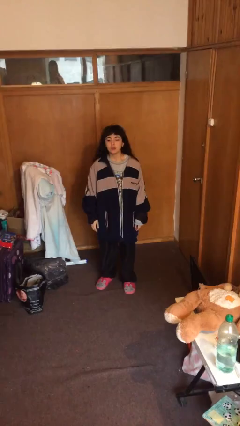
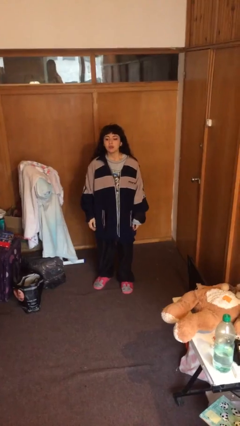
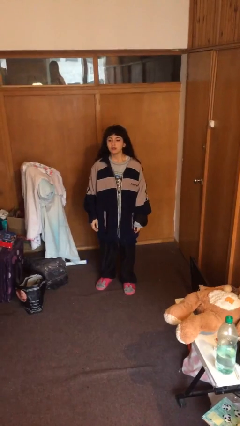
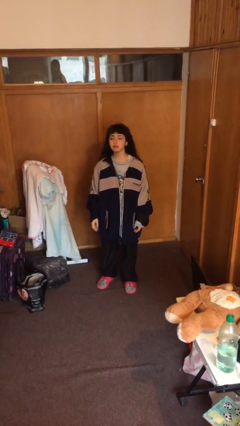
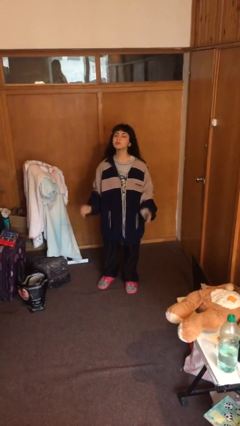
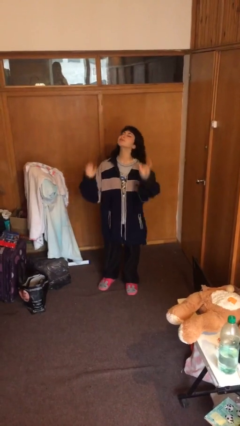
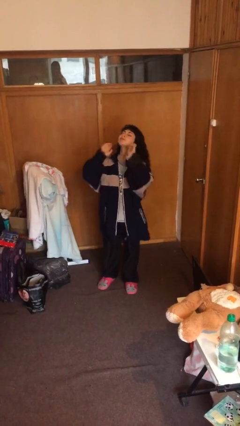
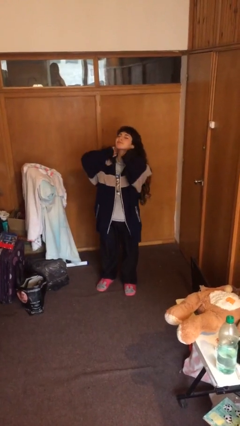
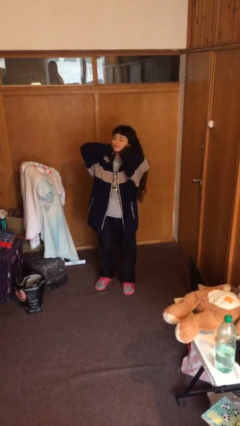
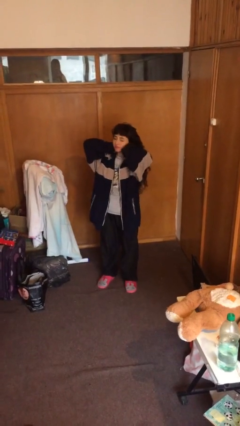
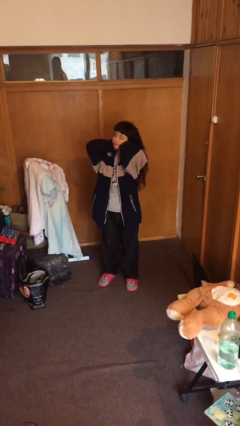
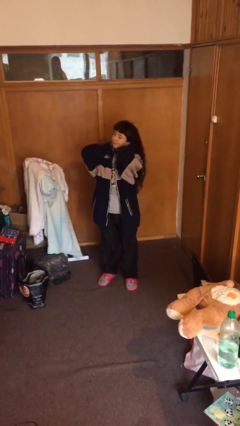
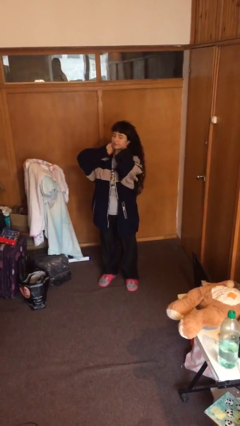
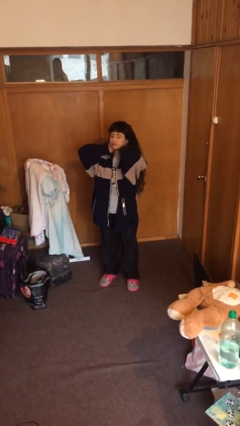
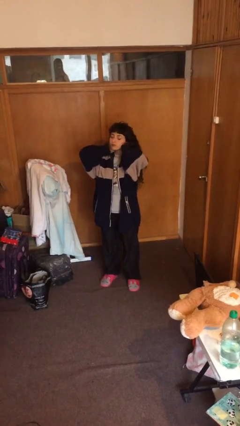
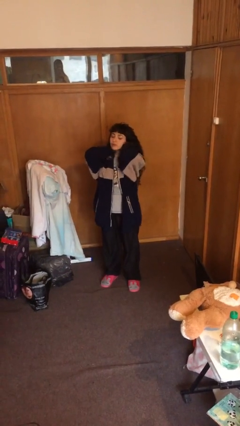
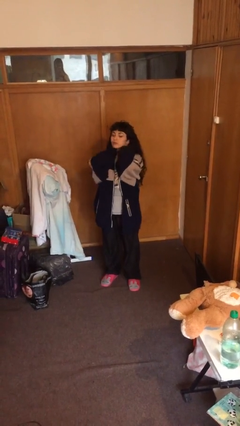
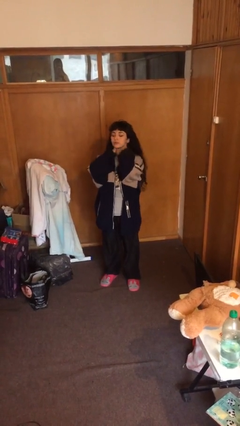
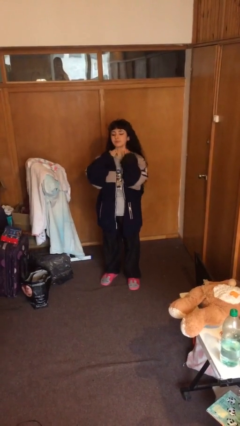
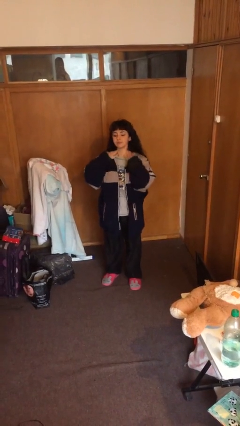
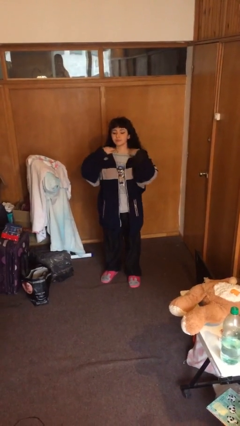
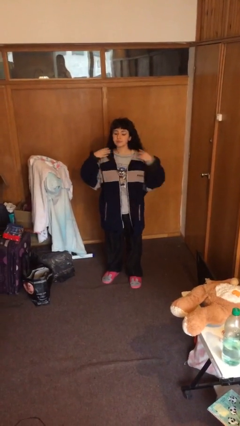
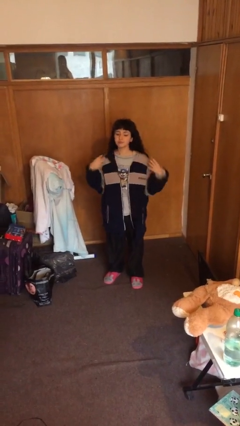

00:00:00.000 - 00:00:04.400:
person rubs neck

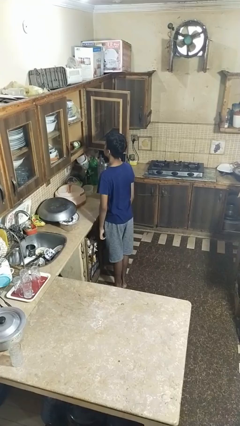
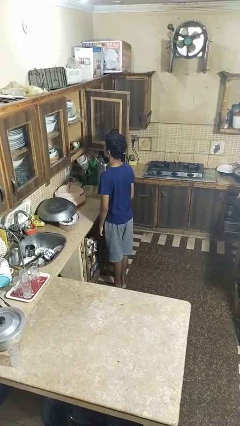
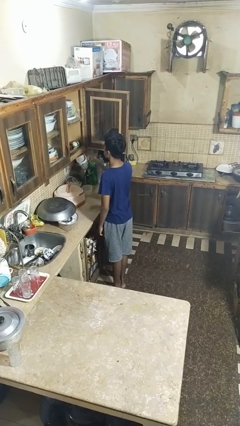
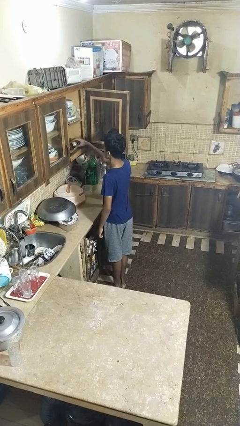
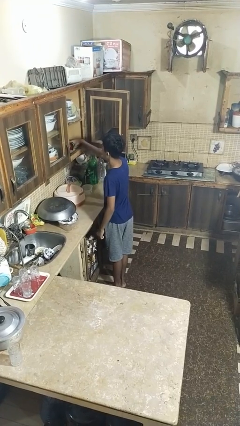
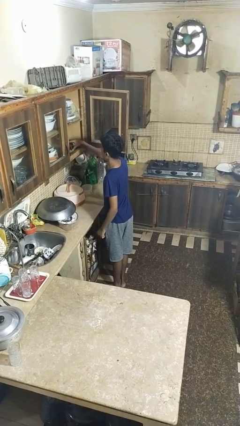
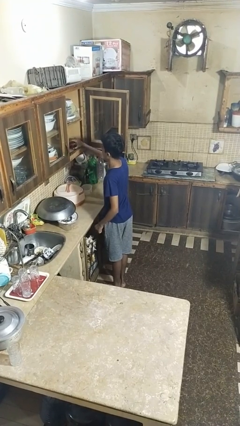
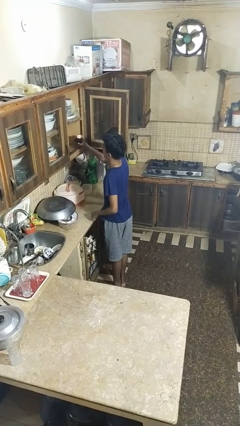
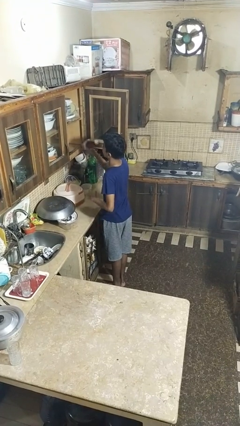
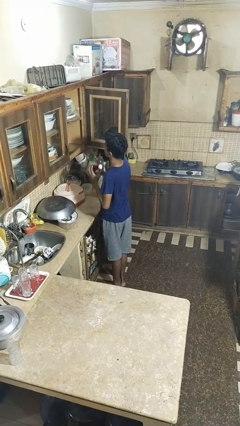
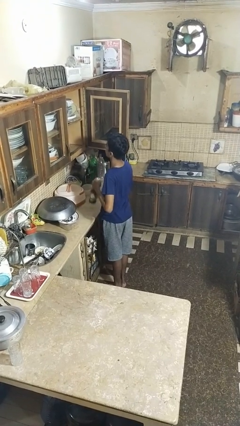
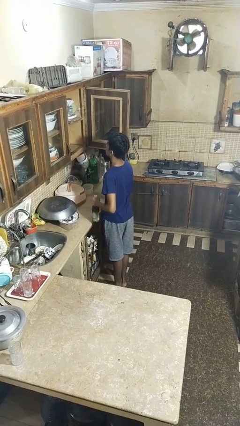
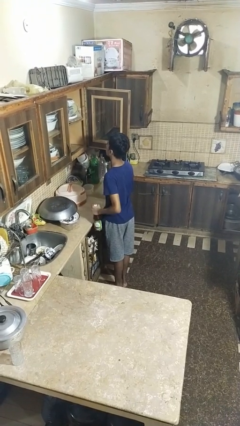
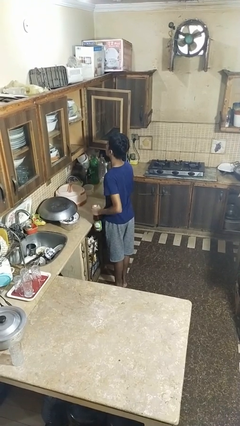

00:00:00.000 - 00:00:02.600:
person takes object from cabinet

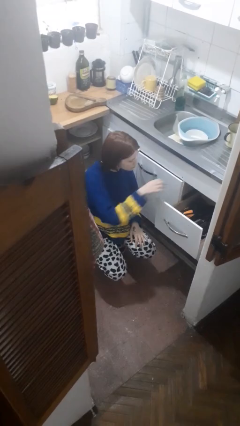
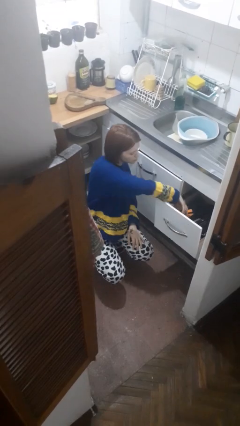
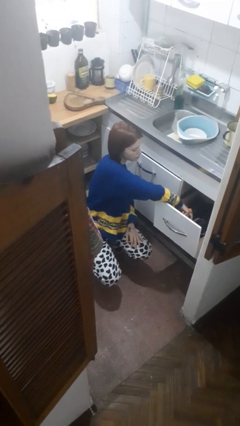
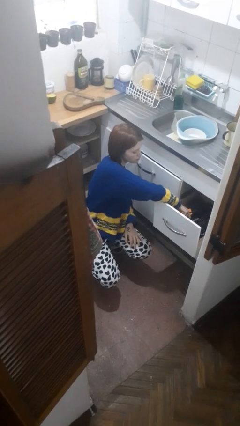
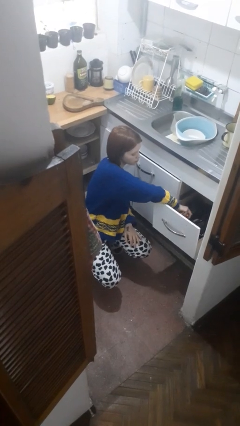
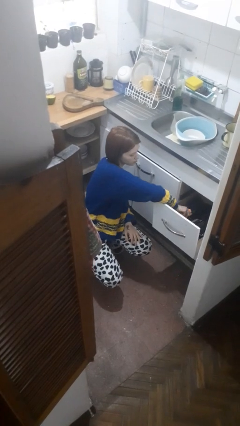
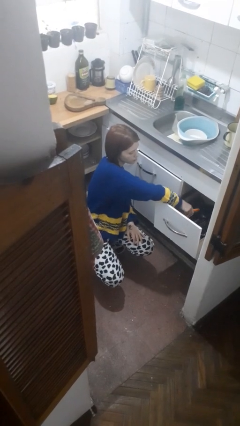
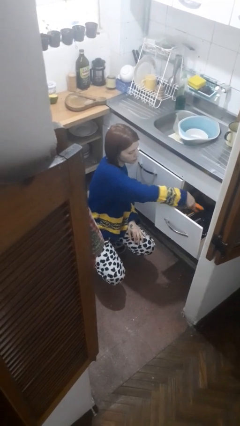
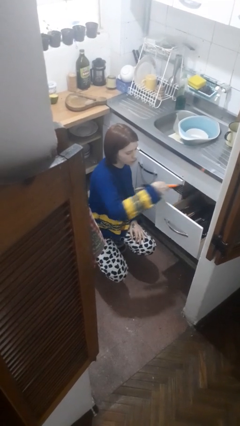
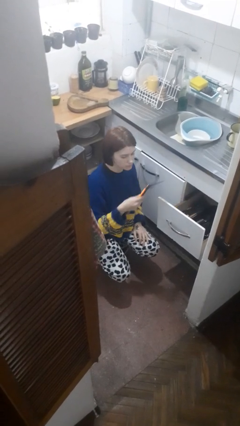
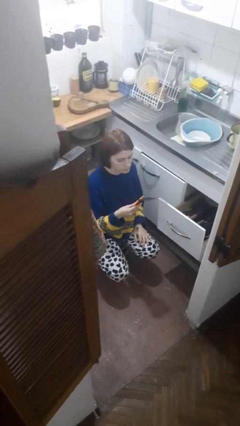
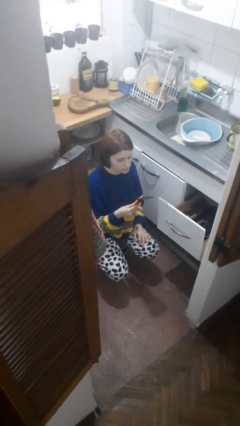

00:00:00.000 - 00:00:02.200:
person takes object from kitchen drawer

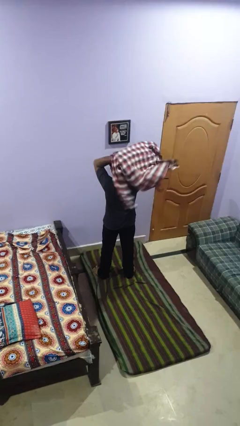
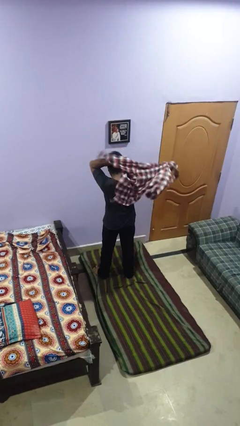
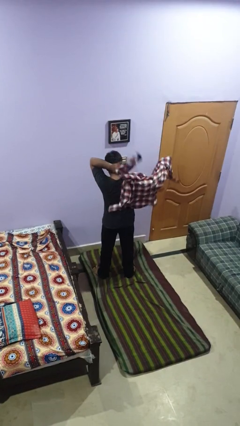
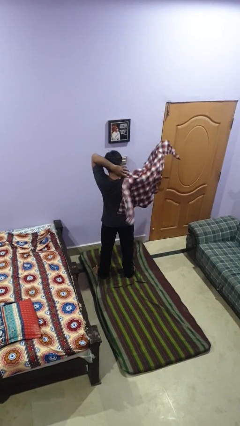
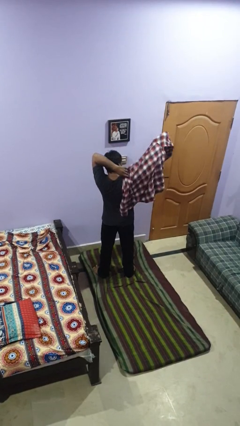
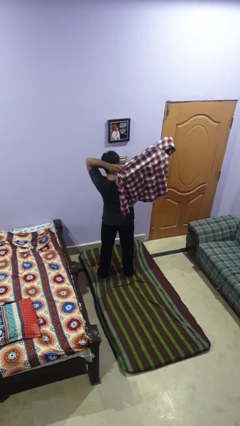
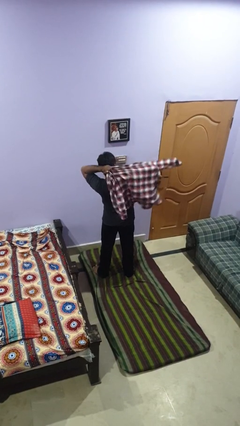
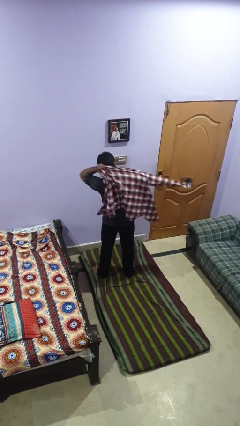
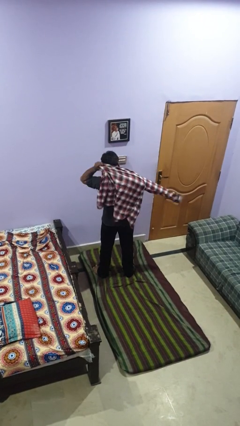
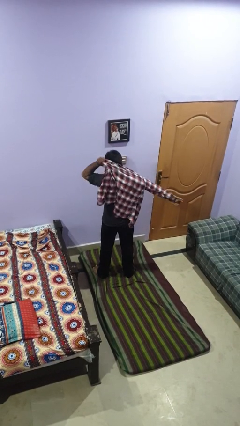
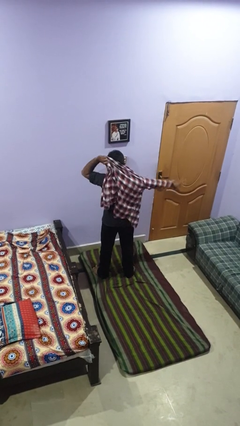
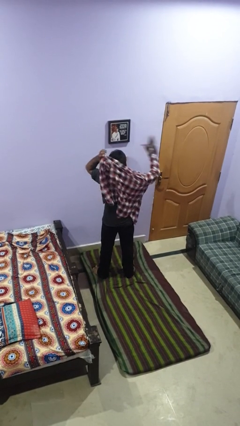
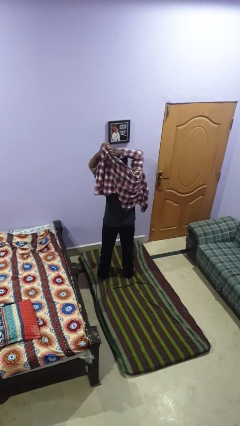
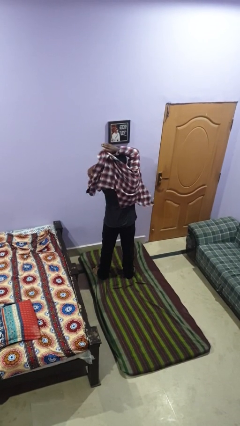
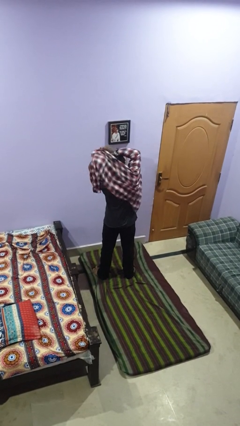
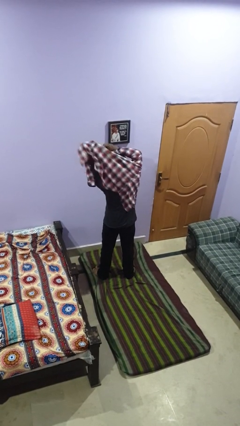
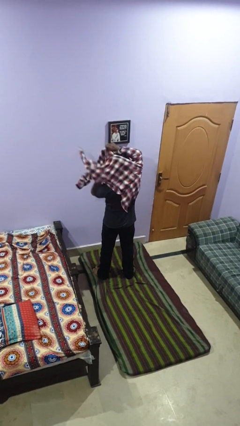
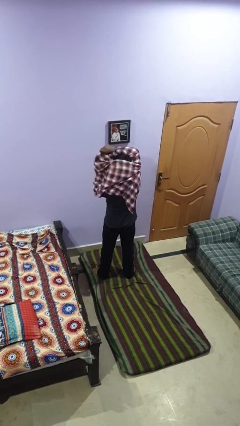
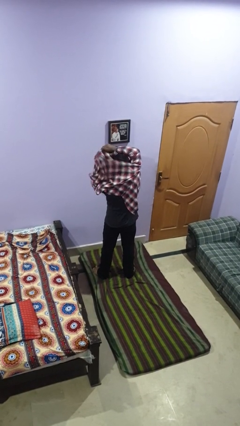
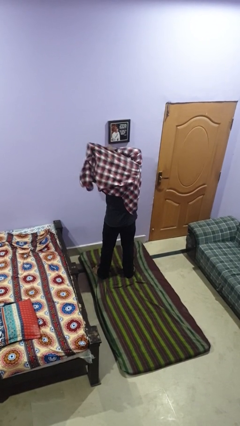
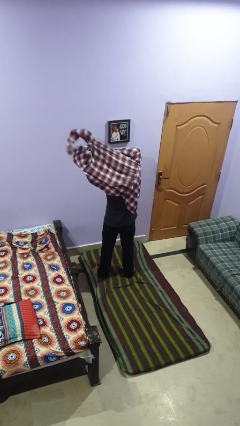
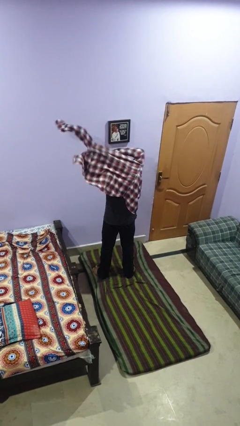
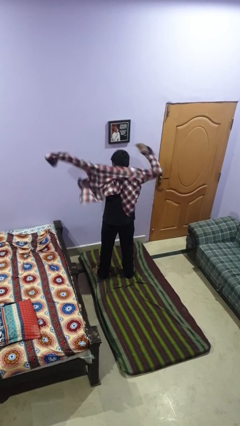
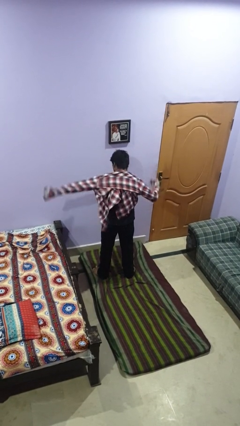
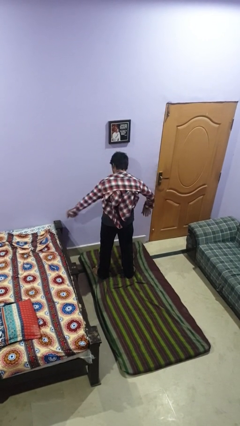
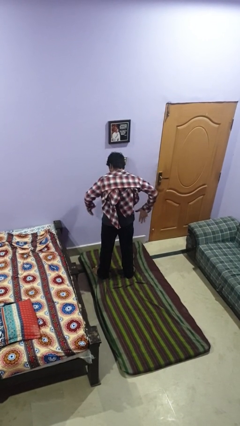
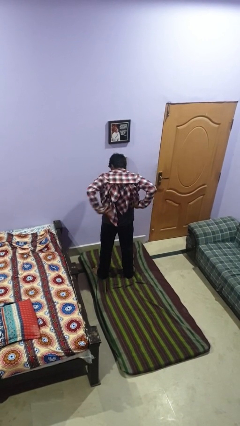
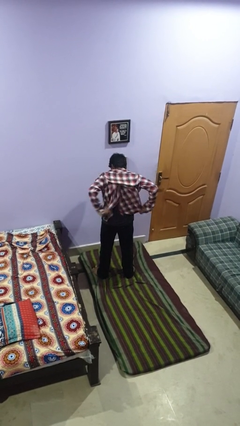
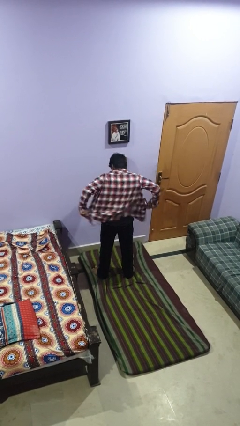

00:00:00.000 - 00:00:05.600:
person puts on shirt

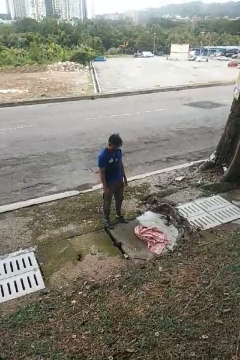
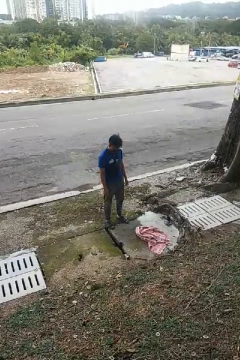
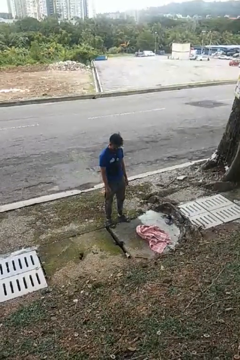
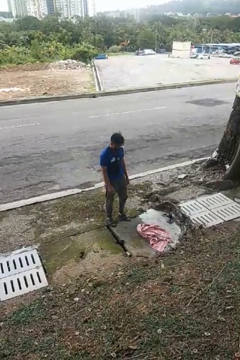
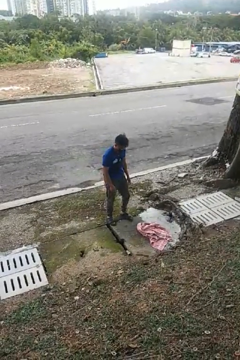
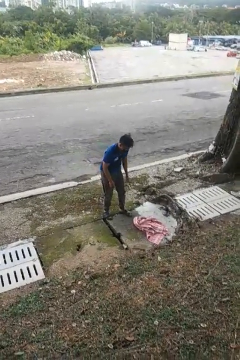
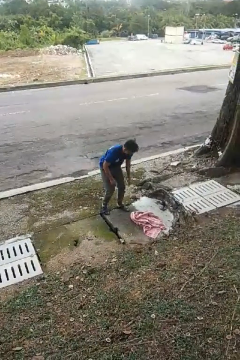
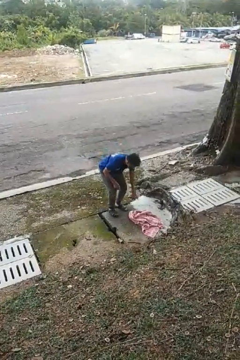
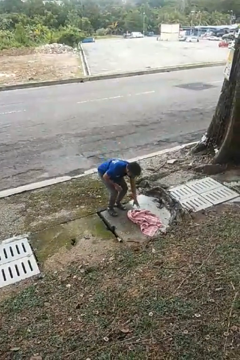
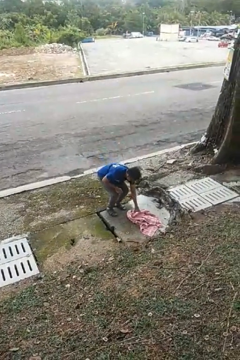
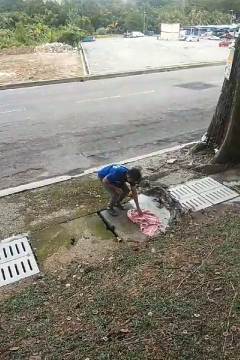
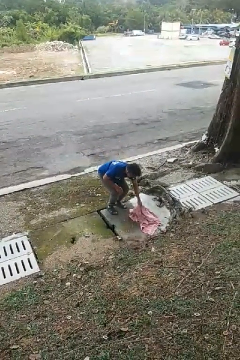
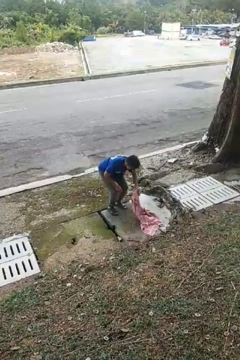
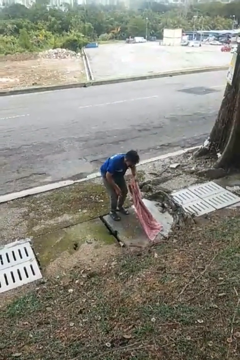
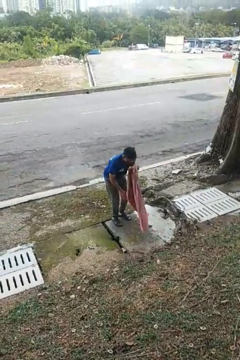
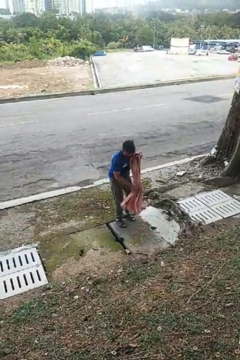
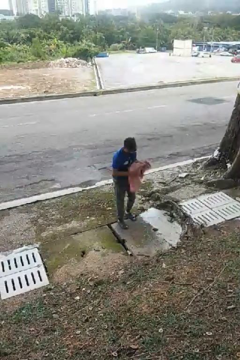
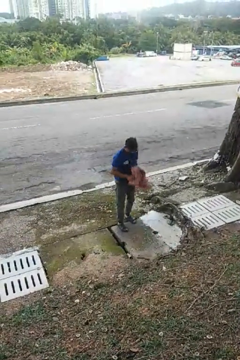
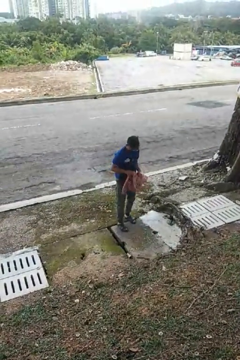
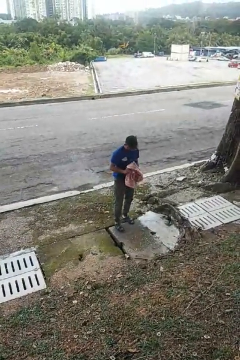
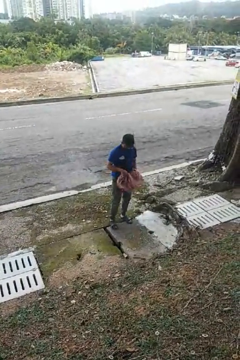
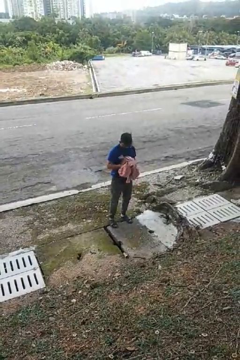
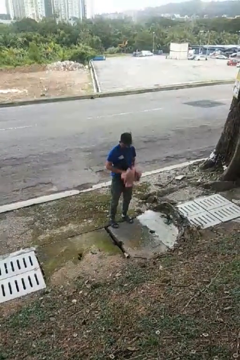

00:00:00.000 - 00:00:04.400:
person picks up object from floor
